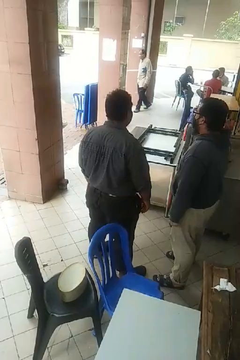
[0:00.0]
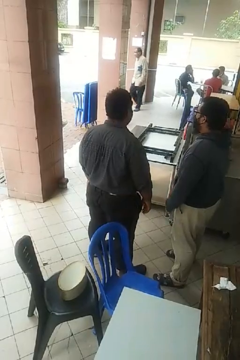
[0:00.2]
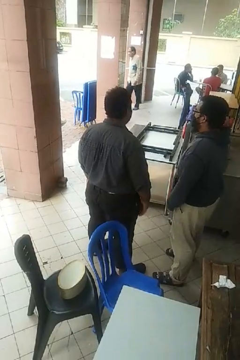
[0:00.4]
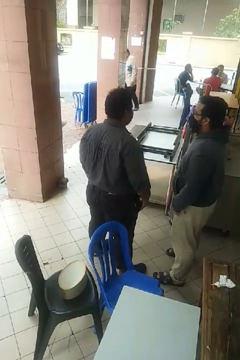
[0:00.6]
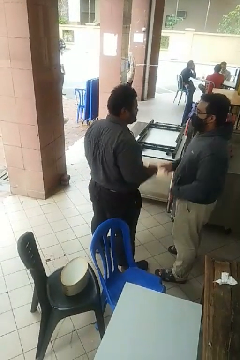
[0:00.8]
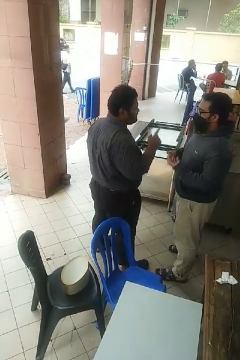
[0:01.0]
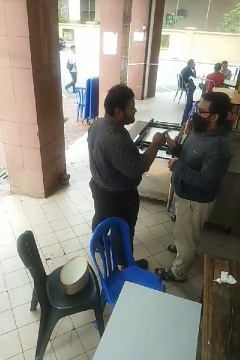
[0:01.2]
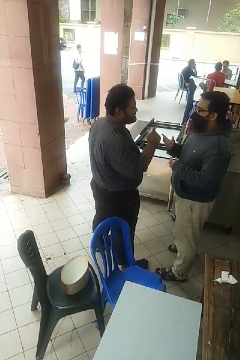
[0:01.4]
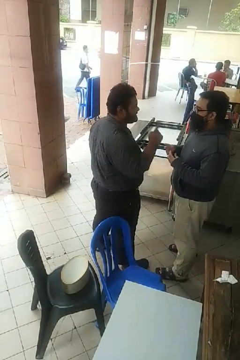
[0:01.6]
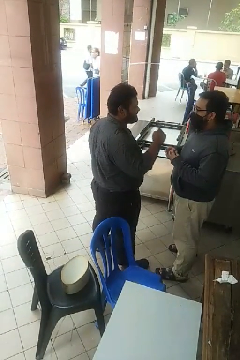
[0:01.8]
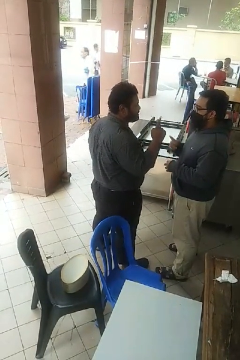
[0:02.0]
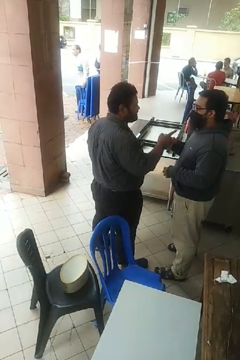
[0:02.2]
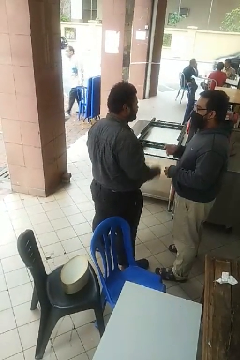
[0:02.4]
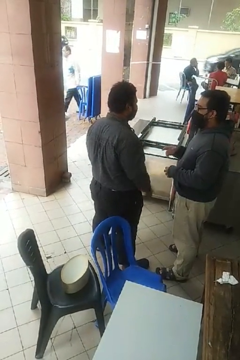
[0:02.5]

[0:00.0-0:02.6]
person talks to person

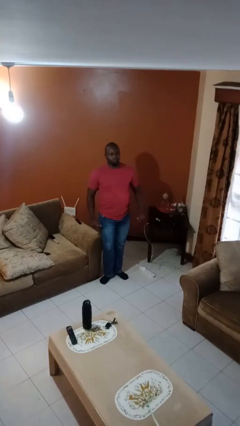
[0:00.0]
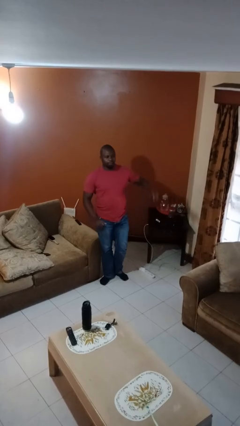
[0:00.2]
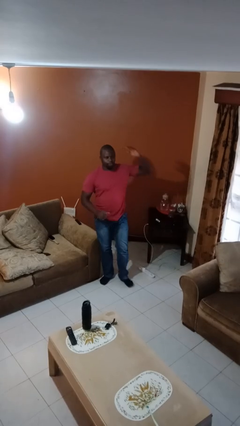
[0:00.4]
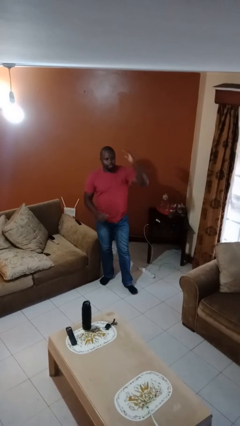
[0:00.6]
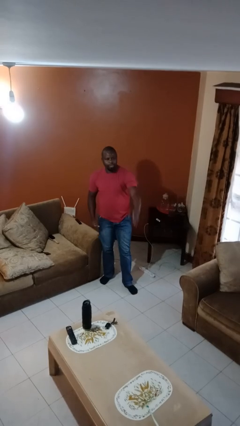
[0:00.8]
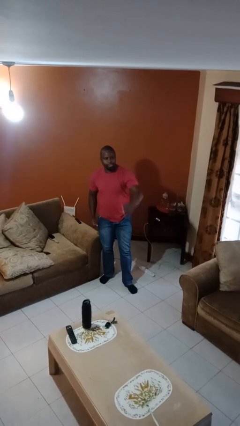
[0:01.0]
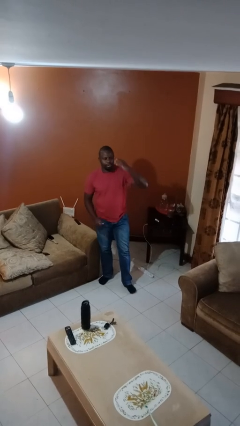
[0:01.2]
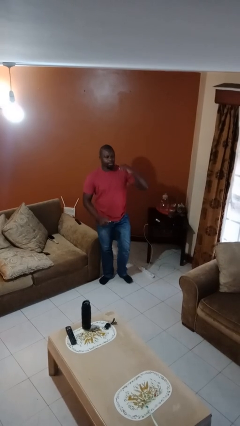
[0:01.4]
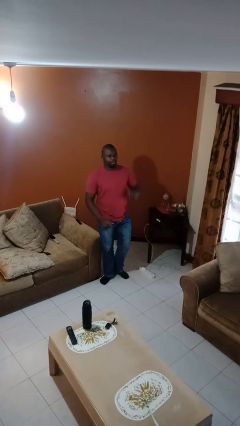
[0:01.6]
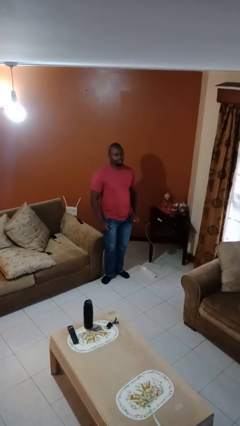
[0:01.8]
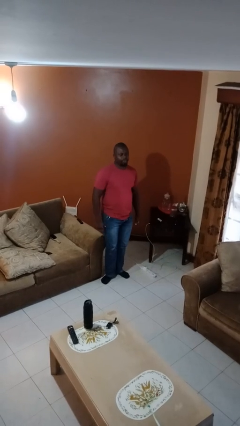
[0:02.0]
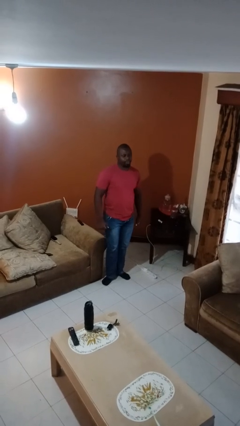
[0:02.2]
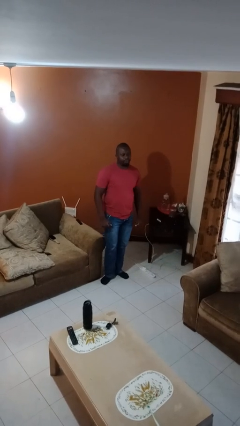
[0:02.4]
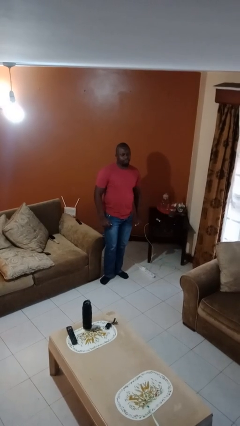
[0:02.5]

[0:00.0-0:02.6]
person karate chop

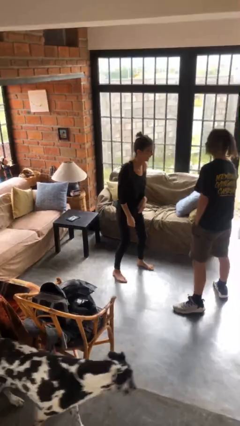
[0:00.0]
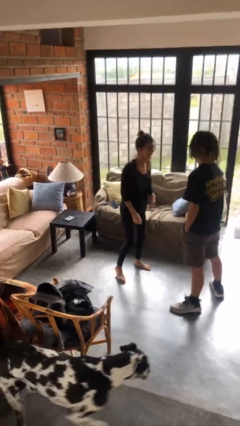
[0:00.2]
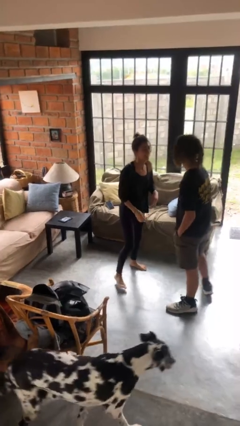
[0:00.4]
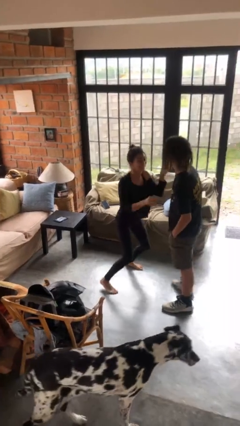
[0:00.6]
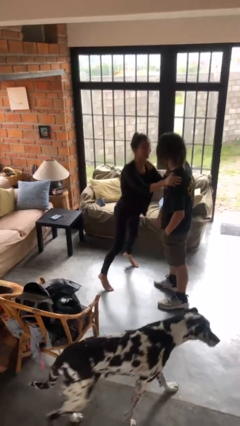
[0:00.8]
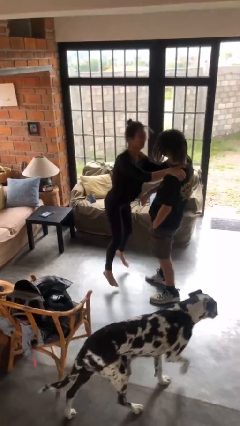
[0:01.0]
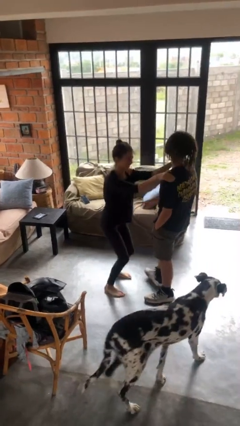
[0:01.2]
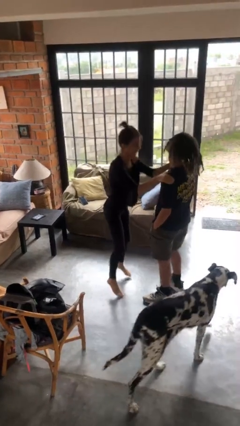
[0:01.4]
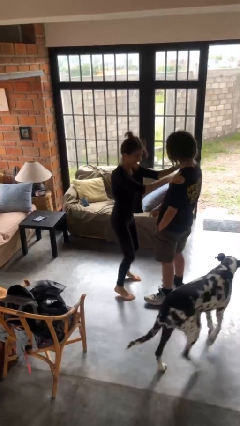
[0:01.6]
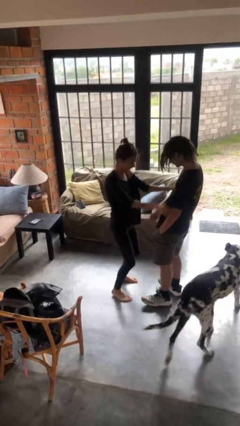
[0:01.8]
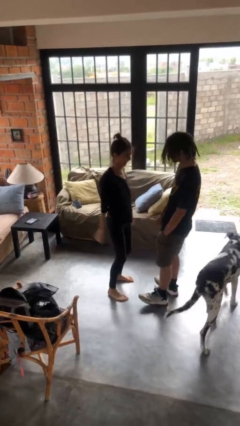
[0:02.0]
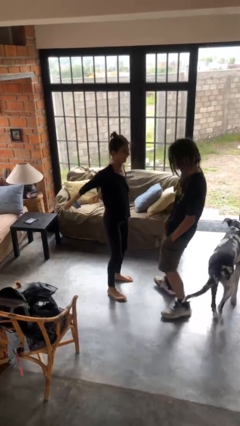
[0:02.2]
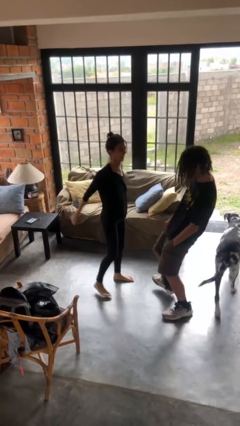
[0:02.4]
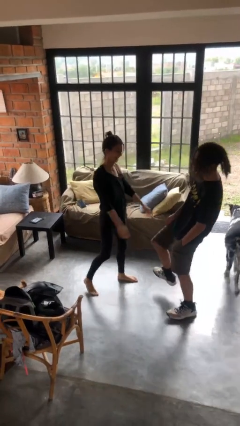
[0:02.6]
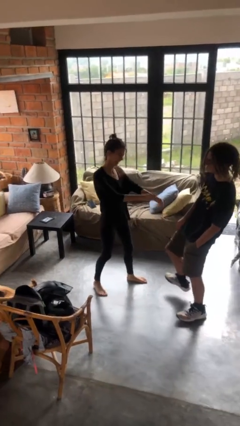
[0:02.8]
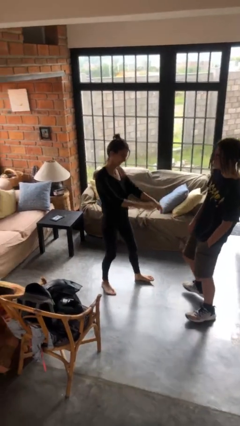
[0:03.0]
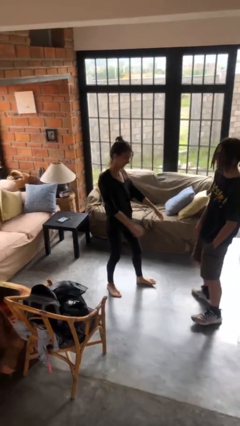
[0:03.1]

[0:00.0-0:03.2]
person shoves person

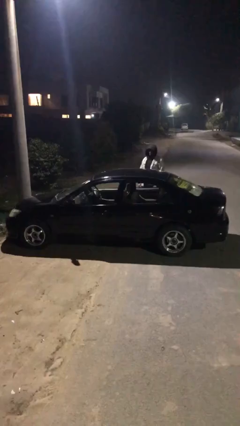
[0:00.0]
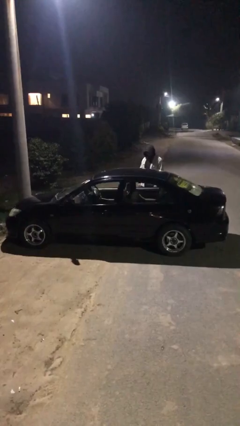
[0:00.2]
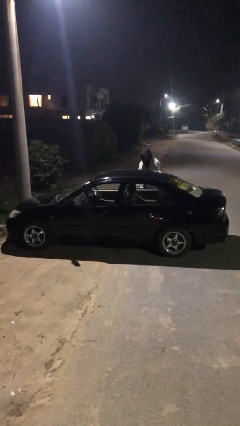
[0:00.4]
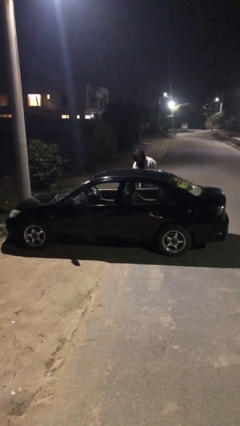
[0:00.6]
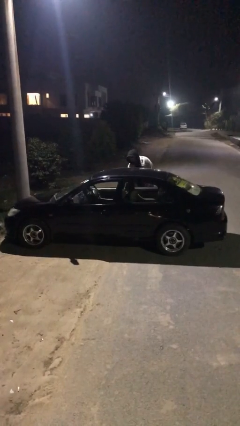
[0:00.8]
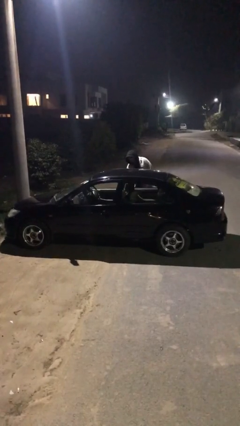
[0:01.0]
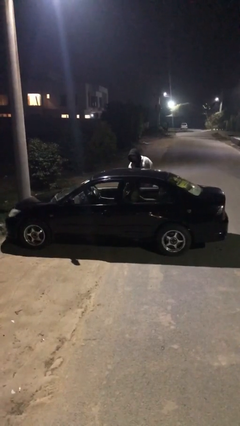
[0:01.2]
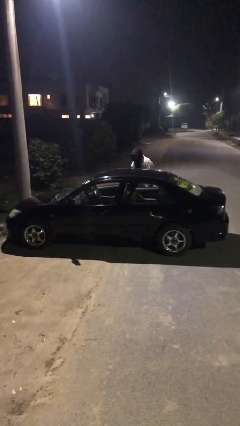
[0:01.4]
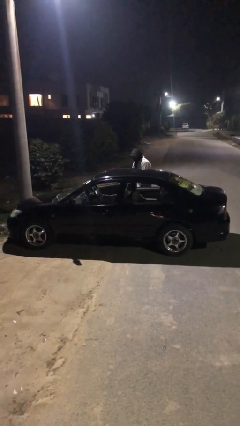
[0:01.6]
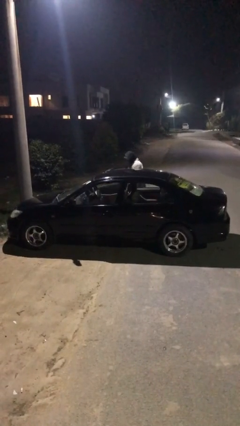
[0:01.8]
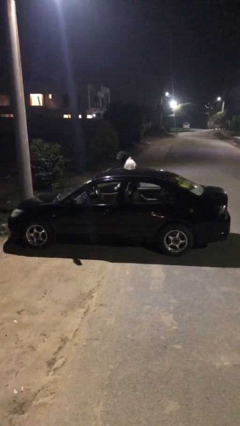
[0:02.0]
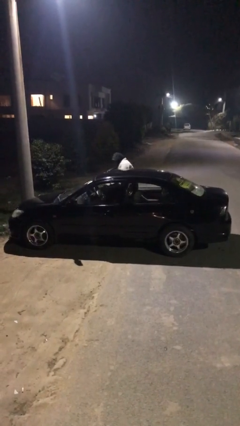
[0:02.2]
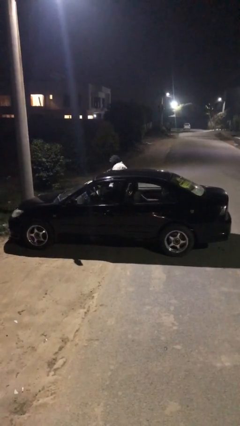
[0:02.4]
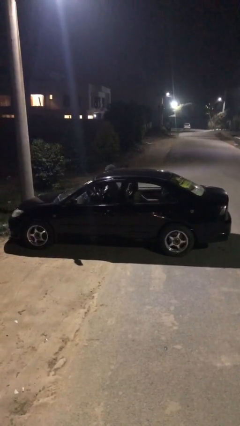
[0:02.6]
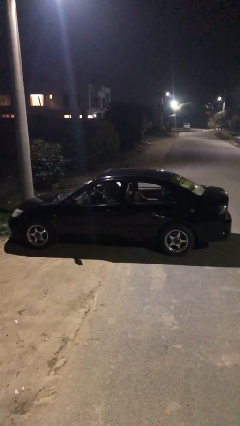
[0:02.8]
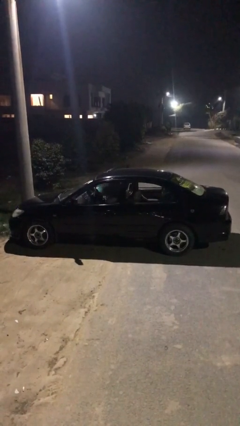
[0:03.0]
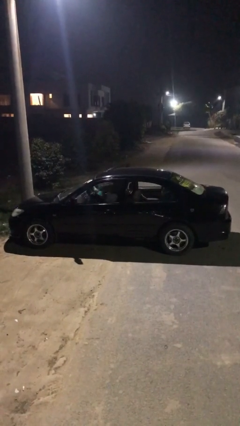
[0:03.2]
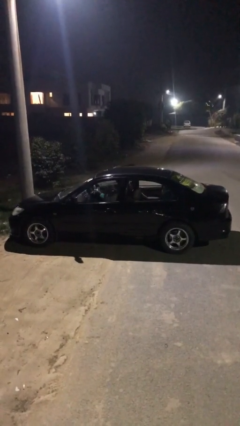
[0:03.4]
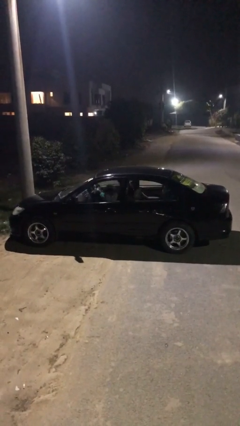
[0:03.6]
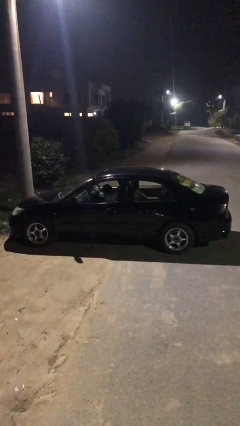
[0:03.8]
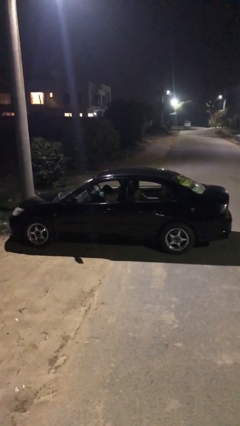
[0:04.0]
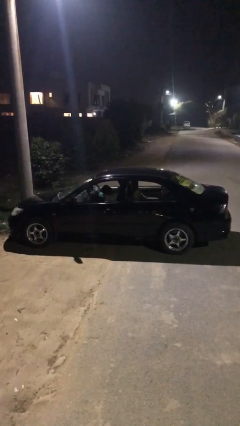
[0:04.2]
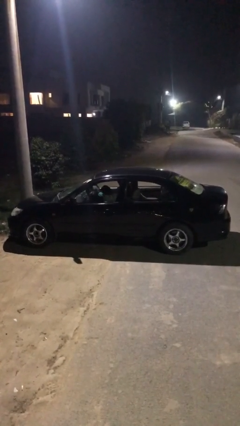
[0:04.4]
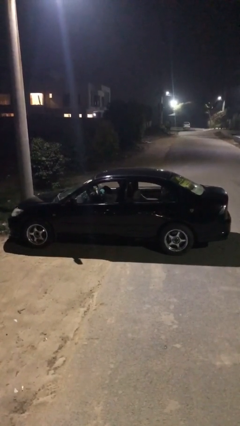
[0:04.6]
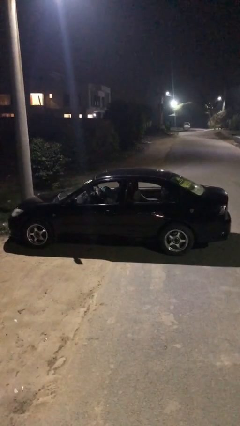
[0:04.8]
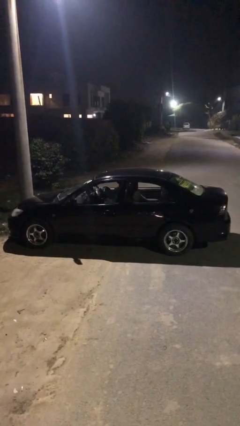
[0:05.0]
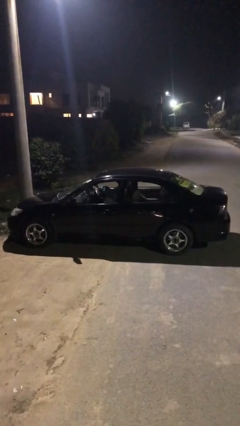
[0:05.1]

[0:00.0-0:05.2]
car picks up person

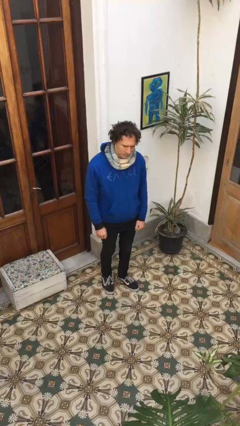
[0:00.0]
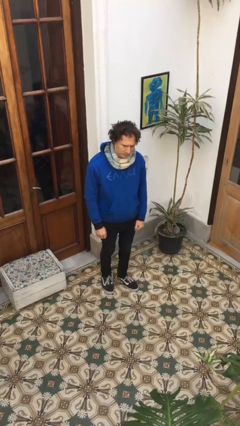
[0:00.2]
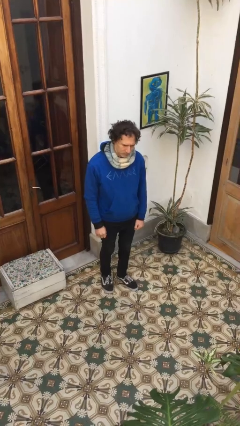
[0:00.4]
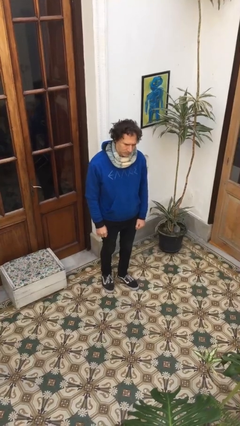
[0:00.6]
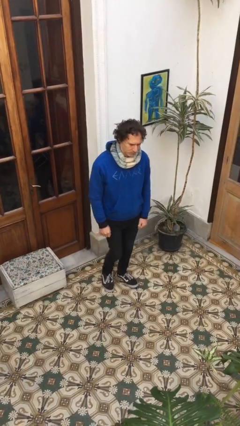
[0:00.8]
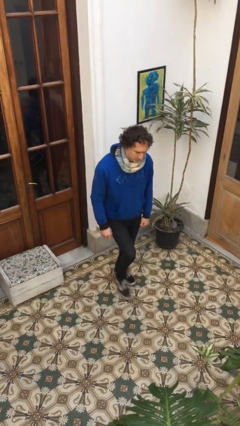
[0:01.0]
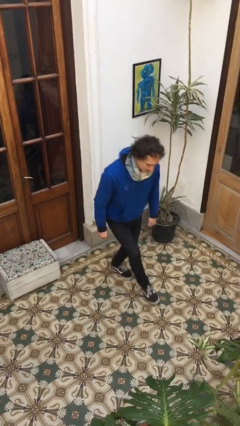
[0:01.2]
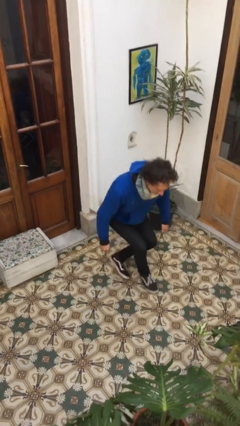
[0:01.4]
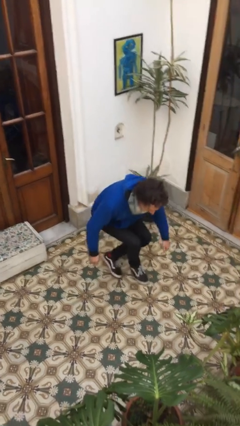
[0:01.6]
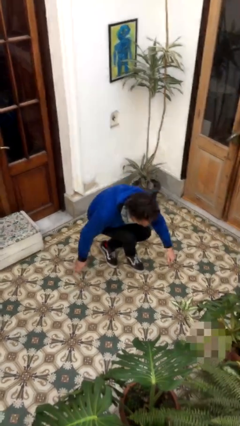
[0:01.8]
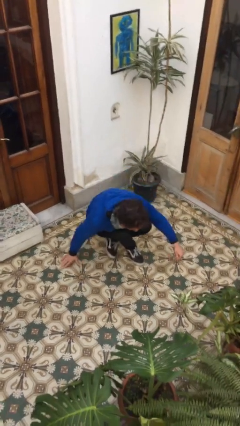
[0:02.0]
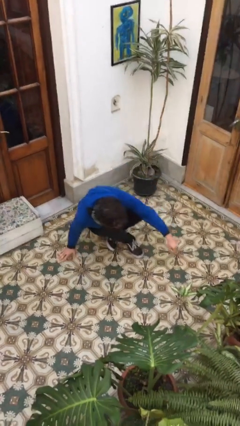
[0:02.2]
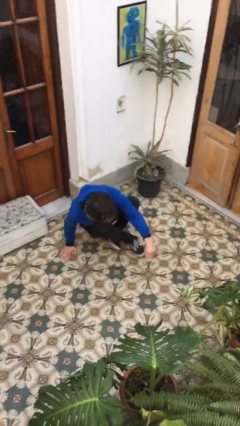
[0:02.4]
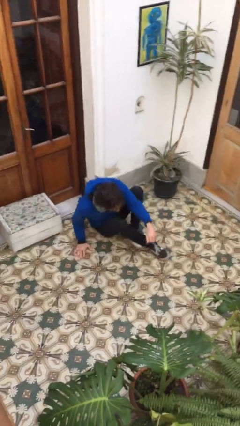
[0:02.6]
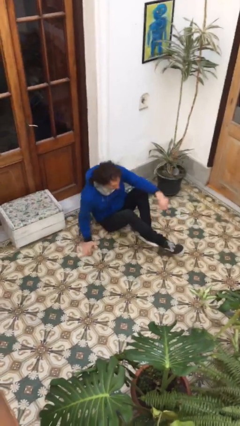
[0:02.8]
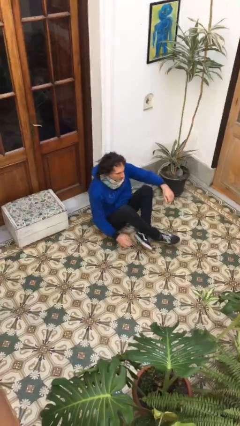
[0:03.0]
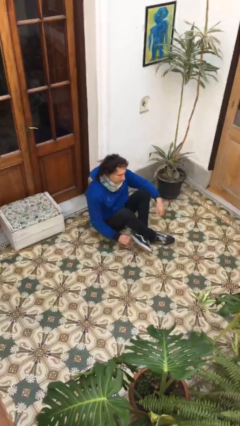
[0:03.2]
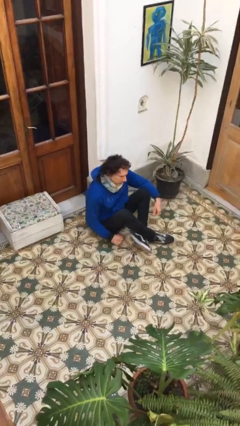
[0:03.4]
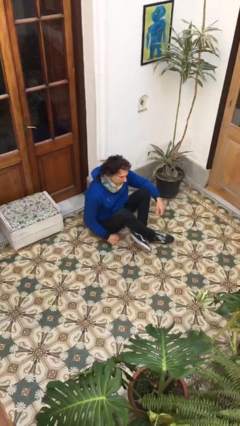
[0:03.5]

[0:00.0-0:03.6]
person sits crisscross

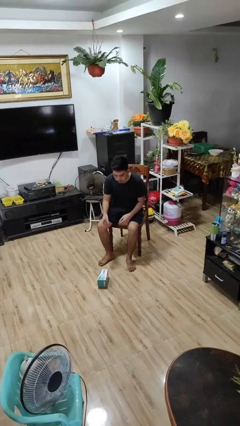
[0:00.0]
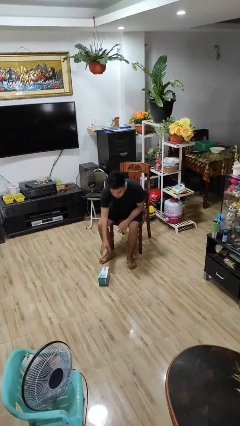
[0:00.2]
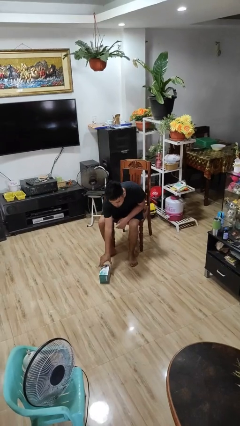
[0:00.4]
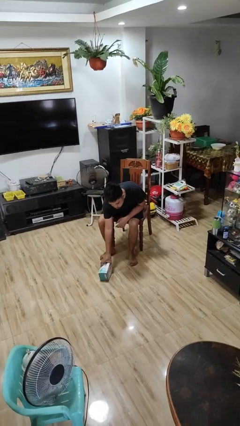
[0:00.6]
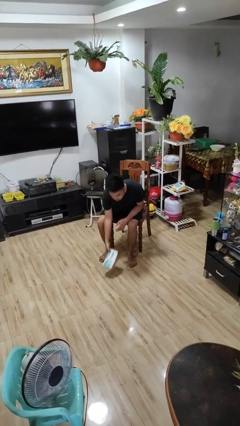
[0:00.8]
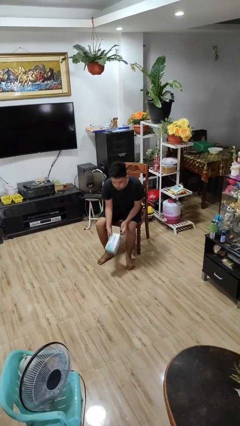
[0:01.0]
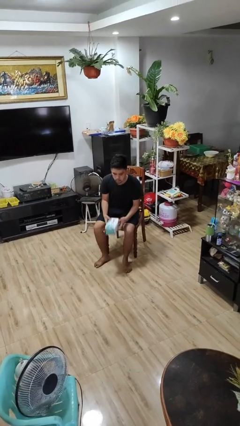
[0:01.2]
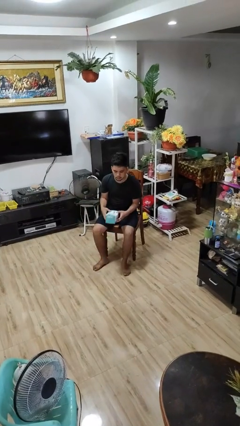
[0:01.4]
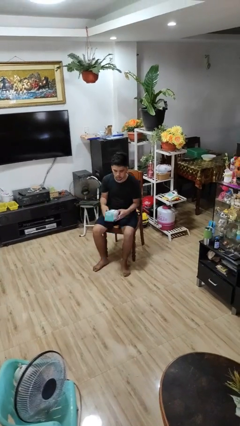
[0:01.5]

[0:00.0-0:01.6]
person picks up object from floor
